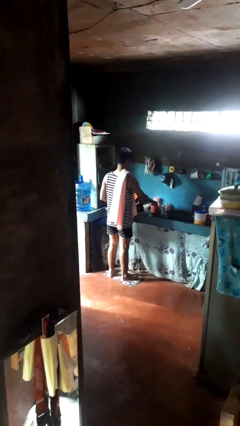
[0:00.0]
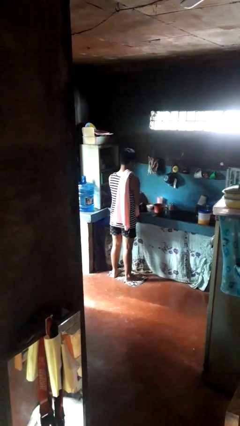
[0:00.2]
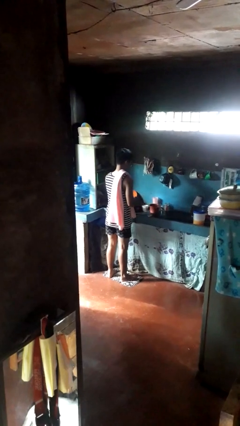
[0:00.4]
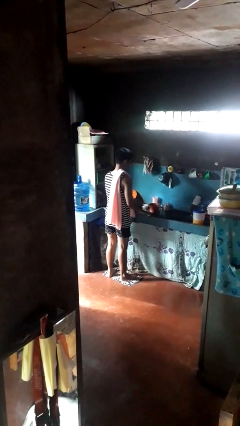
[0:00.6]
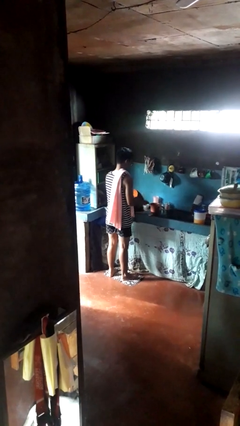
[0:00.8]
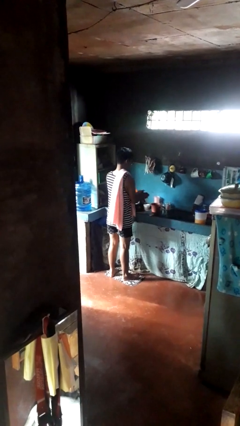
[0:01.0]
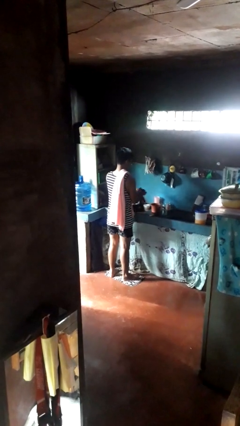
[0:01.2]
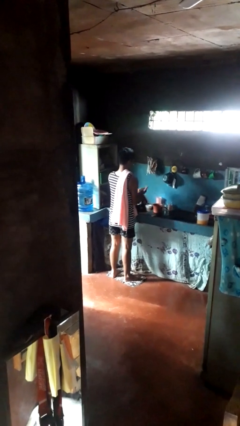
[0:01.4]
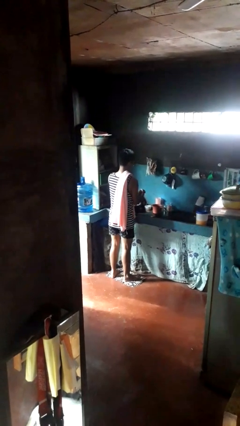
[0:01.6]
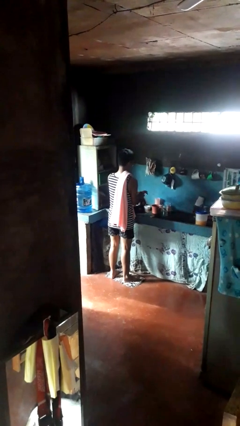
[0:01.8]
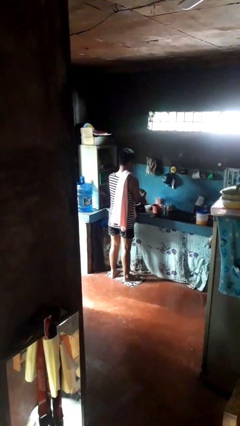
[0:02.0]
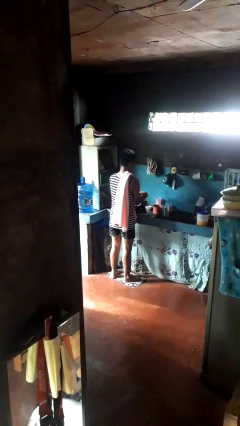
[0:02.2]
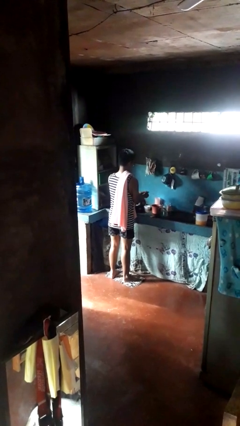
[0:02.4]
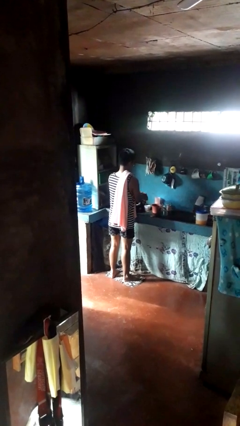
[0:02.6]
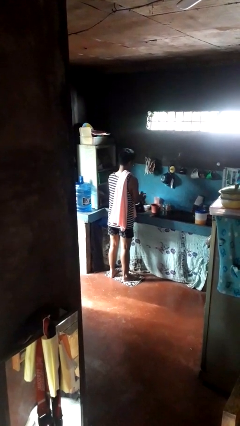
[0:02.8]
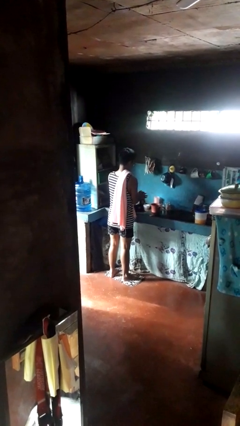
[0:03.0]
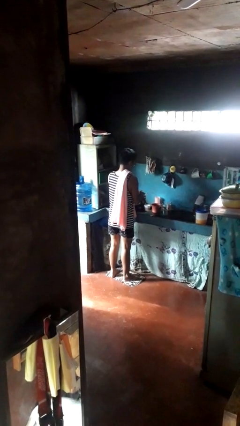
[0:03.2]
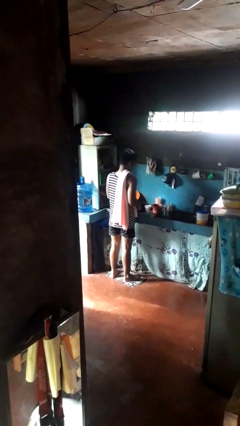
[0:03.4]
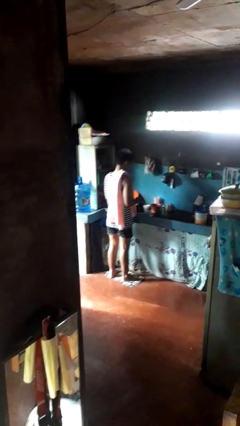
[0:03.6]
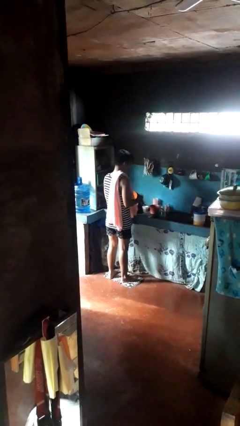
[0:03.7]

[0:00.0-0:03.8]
person washes hands

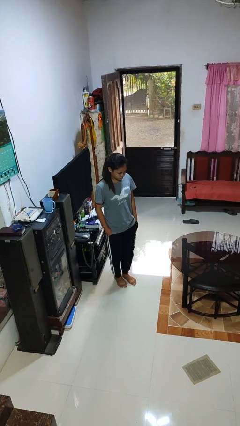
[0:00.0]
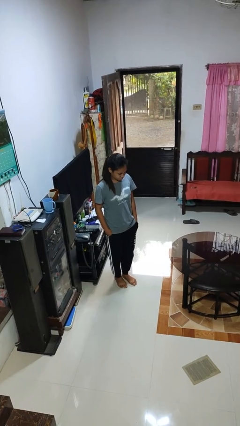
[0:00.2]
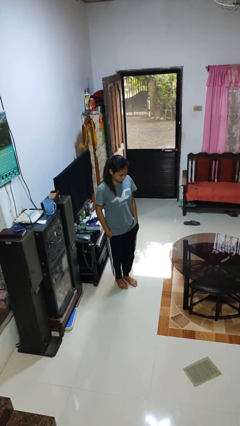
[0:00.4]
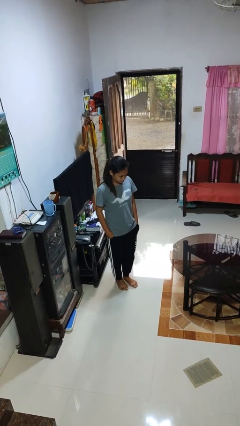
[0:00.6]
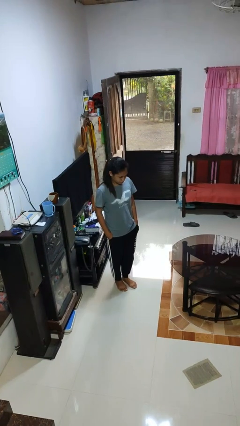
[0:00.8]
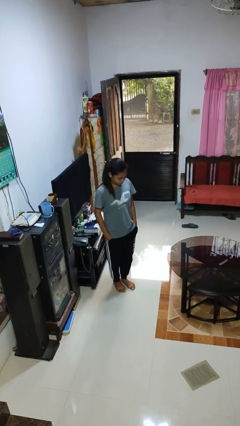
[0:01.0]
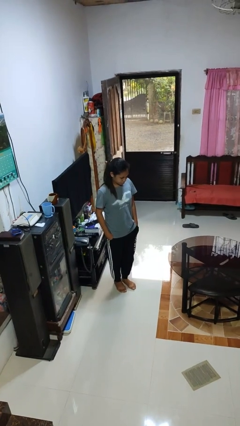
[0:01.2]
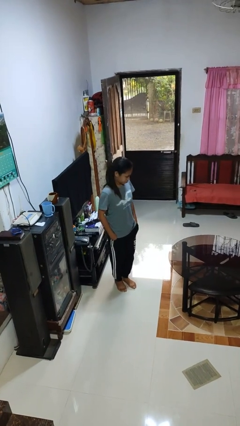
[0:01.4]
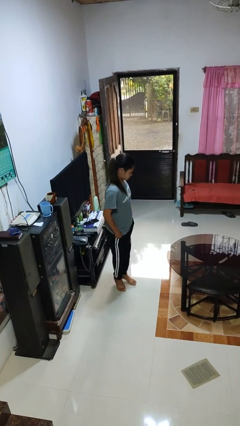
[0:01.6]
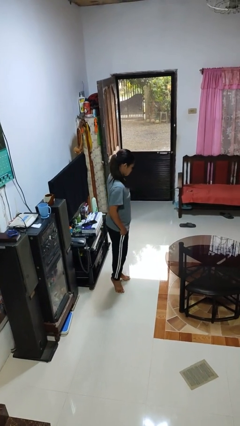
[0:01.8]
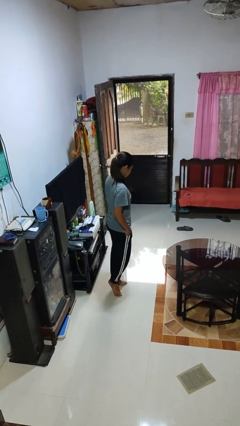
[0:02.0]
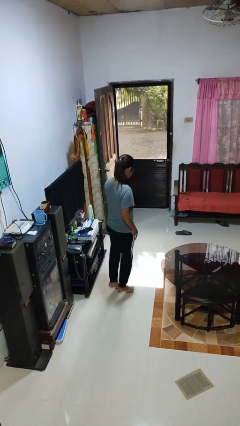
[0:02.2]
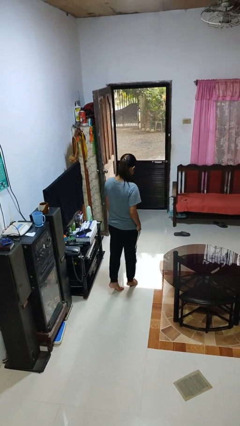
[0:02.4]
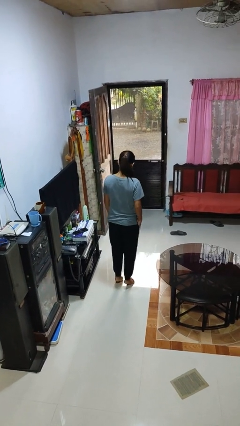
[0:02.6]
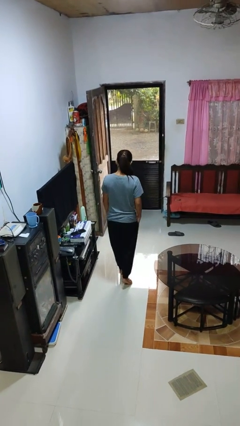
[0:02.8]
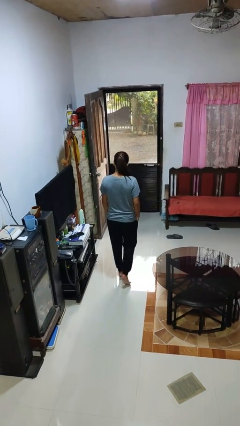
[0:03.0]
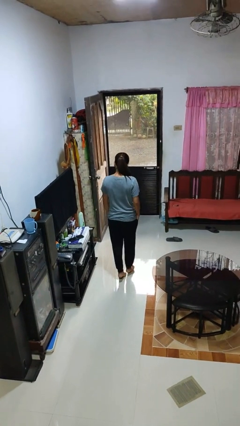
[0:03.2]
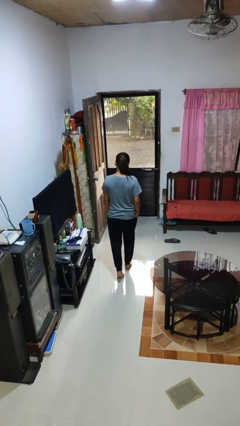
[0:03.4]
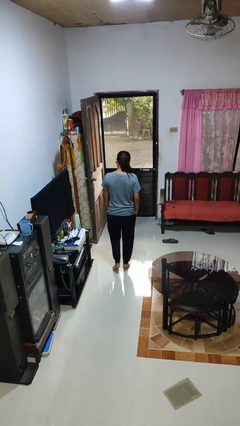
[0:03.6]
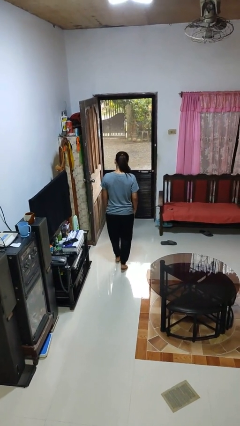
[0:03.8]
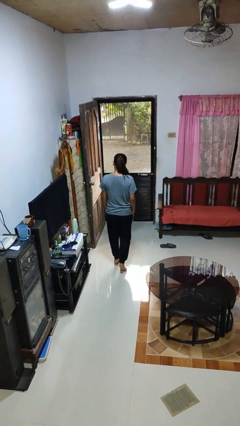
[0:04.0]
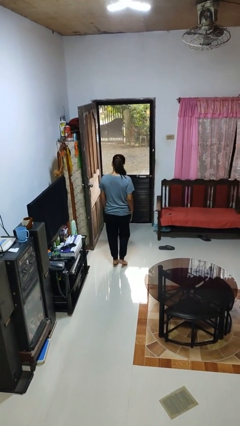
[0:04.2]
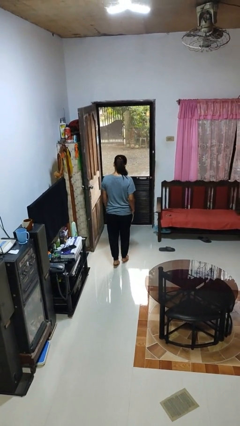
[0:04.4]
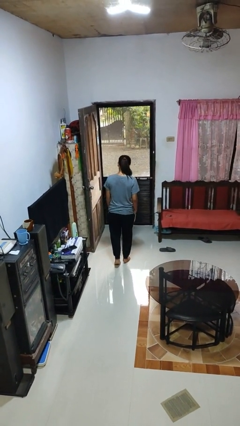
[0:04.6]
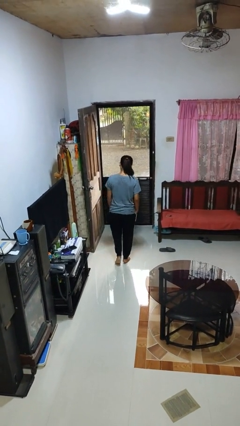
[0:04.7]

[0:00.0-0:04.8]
person walks tiptoe

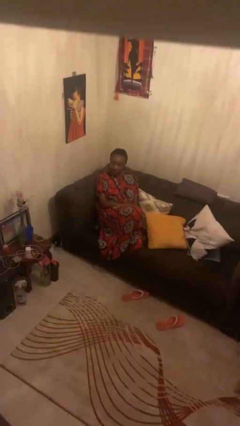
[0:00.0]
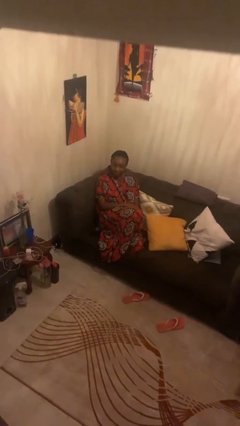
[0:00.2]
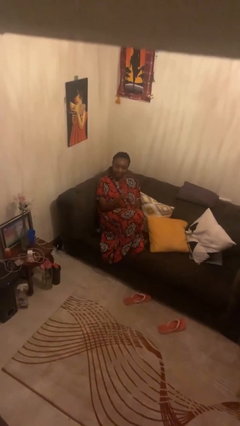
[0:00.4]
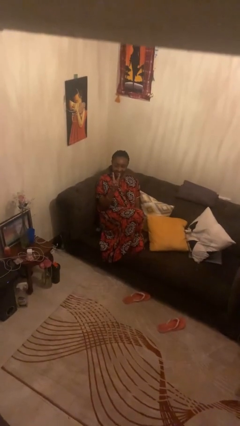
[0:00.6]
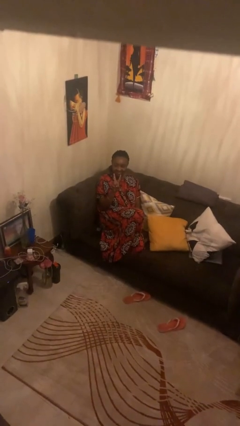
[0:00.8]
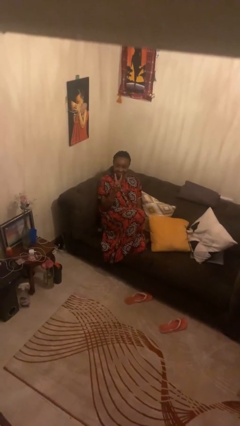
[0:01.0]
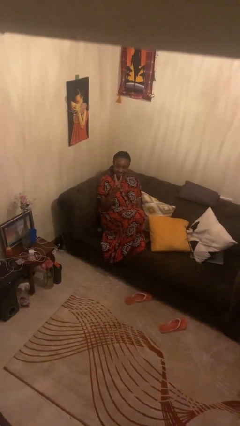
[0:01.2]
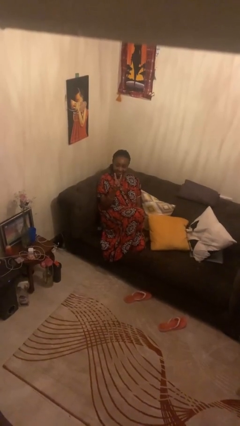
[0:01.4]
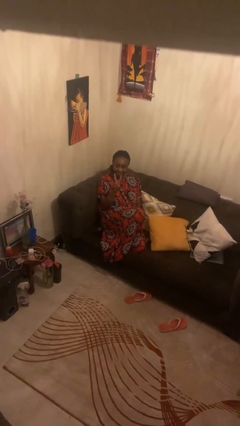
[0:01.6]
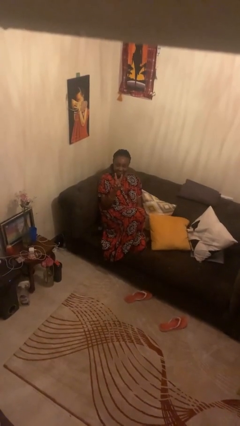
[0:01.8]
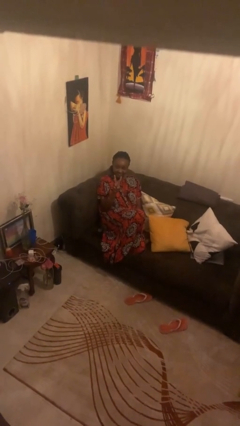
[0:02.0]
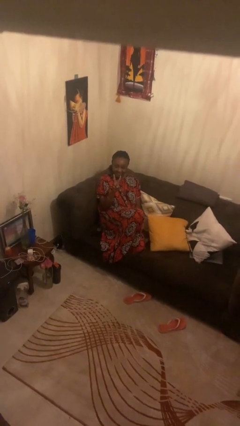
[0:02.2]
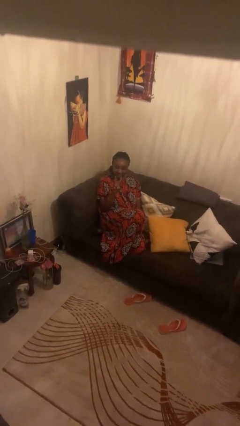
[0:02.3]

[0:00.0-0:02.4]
person gestures peace

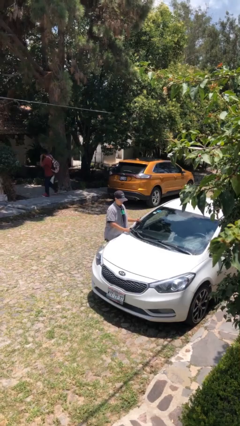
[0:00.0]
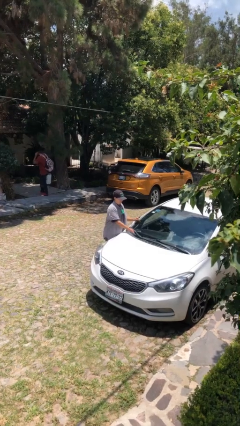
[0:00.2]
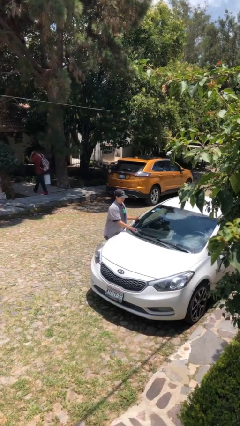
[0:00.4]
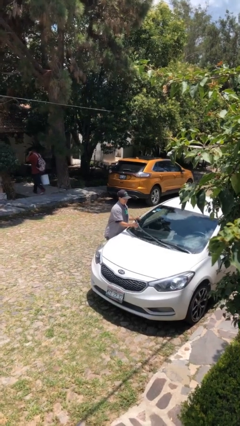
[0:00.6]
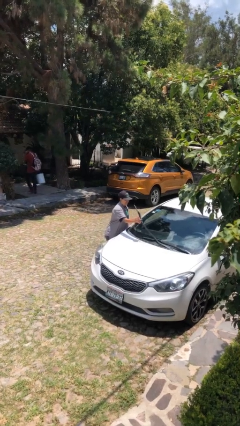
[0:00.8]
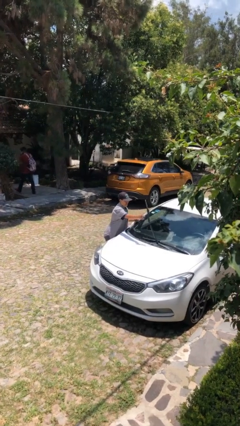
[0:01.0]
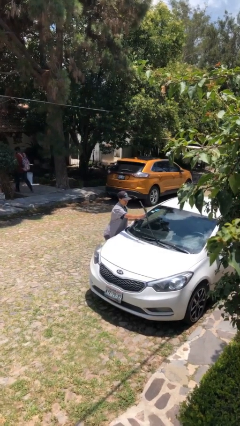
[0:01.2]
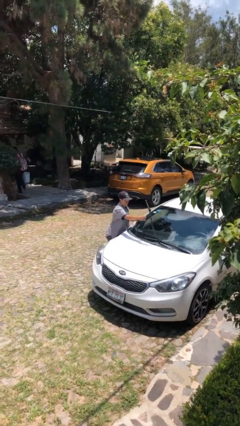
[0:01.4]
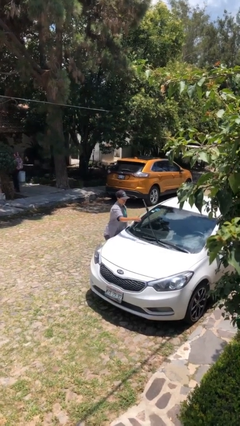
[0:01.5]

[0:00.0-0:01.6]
person flips up car wipers

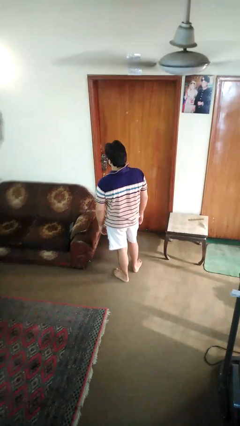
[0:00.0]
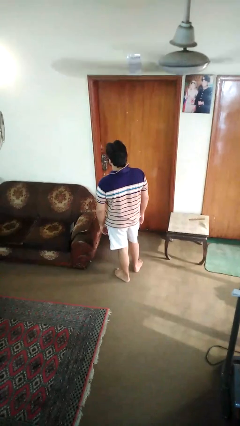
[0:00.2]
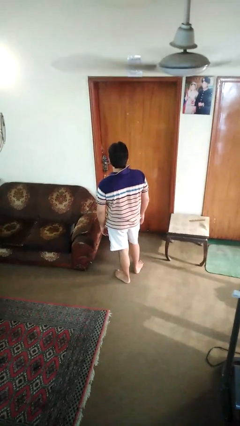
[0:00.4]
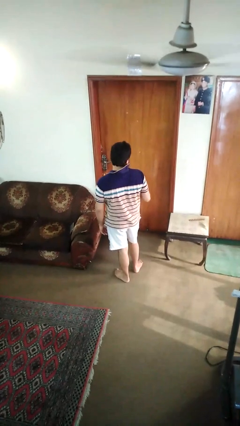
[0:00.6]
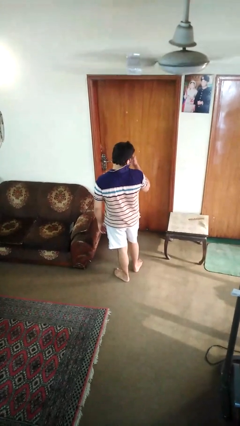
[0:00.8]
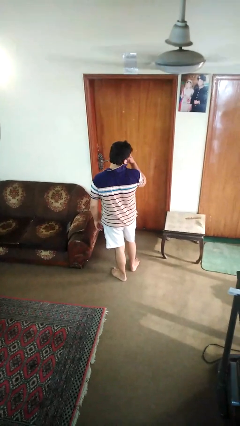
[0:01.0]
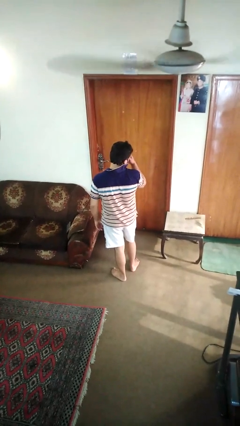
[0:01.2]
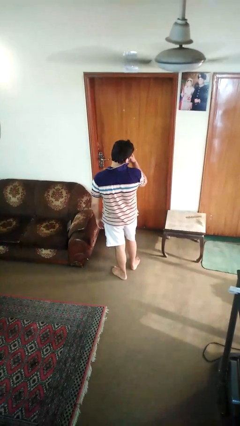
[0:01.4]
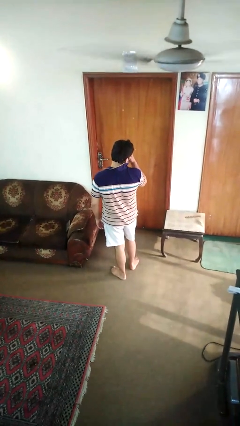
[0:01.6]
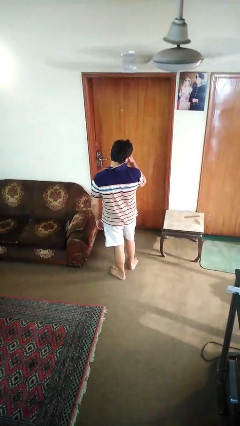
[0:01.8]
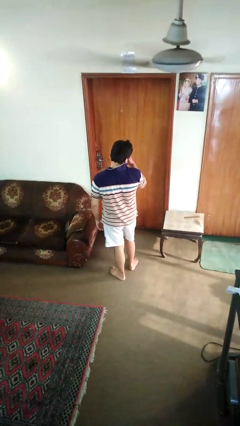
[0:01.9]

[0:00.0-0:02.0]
person rubs eyes

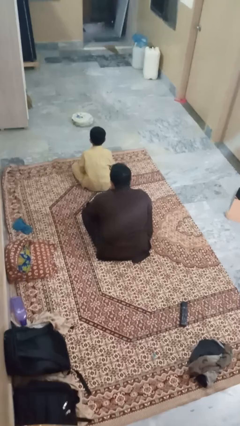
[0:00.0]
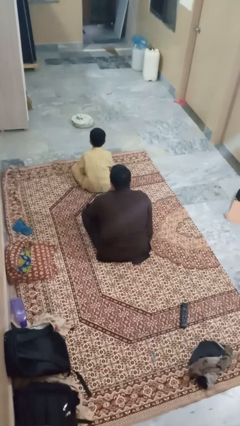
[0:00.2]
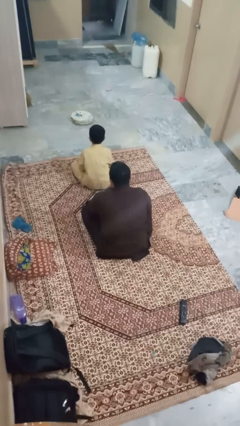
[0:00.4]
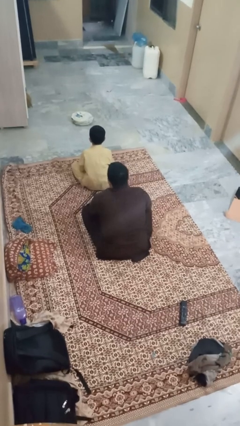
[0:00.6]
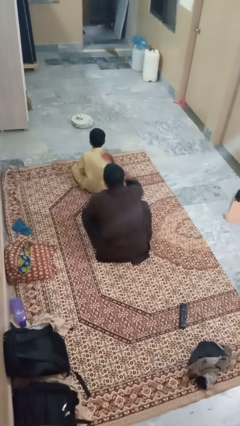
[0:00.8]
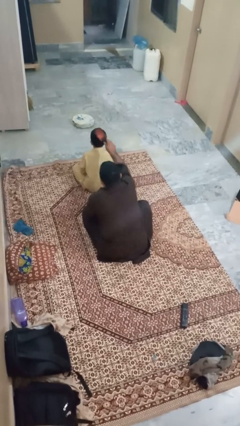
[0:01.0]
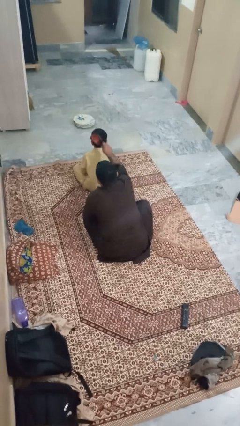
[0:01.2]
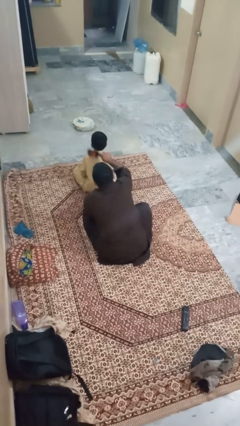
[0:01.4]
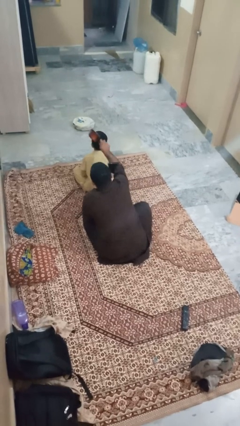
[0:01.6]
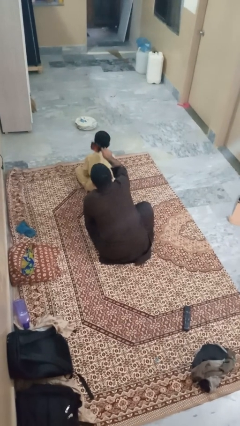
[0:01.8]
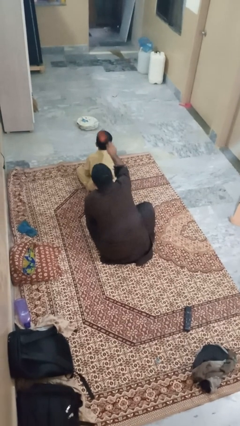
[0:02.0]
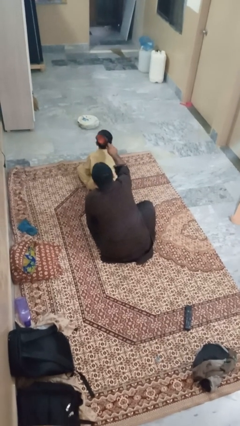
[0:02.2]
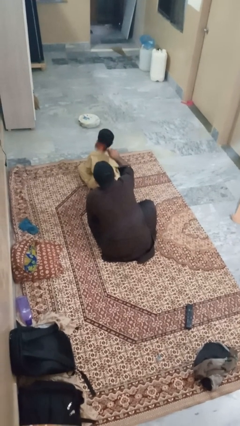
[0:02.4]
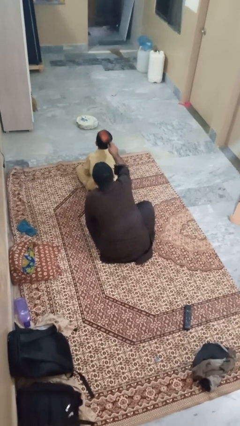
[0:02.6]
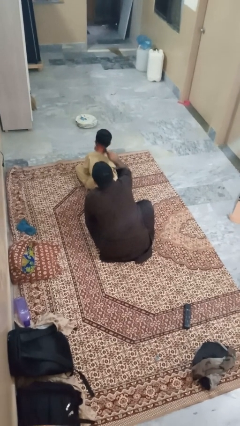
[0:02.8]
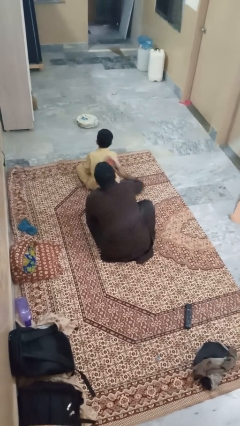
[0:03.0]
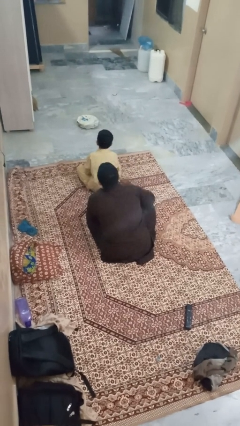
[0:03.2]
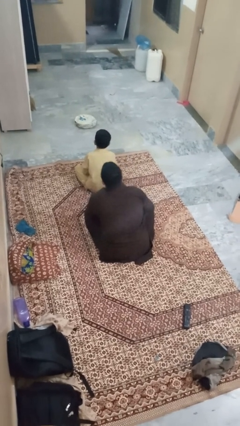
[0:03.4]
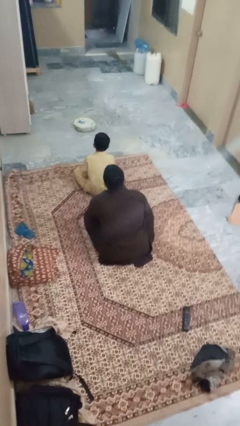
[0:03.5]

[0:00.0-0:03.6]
person brushes hair of person
